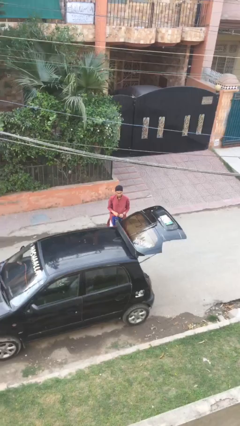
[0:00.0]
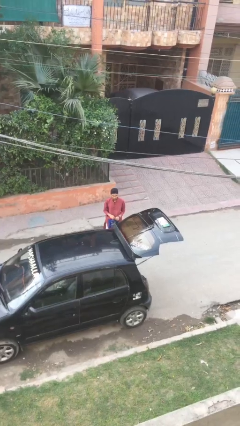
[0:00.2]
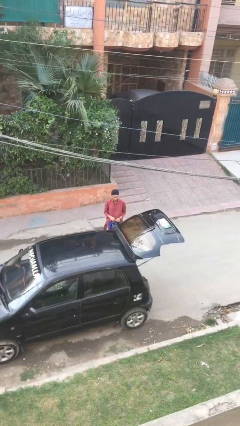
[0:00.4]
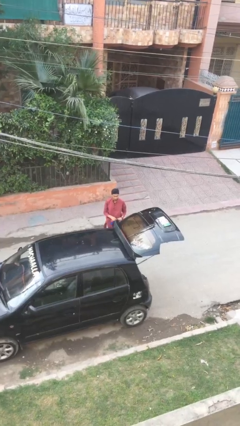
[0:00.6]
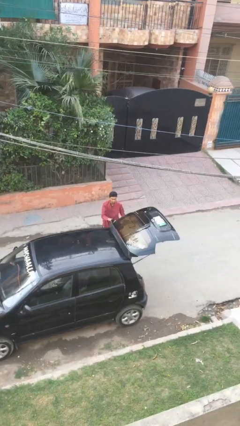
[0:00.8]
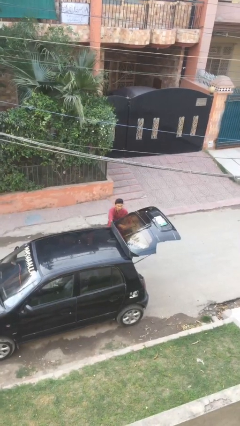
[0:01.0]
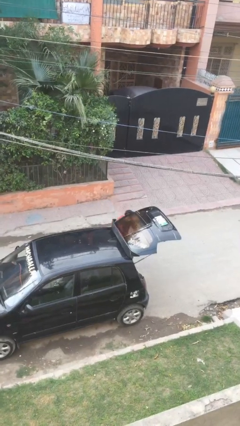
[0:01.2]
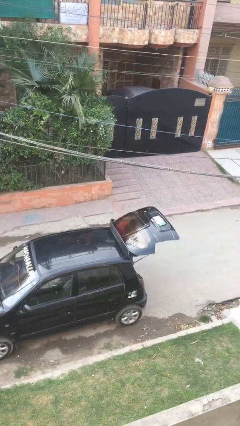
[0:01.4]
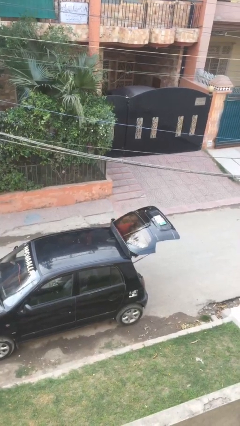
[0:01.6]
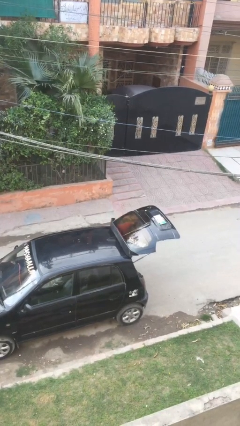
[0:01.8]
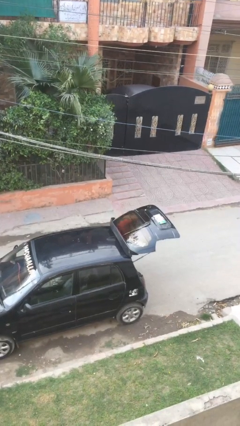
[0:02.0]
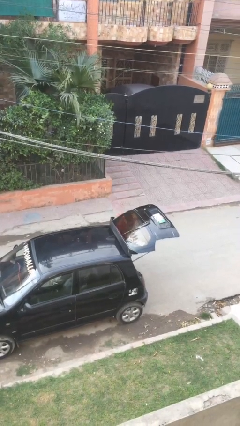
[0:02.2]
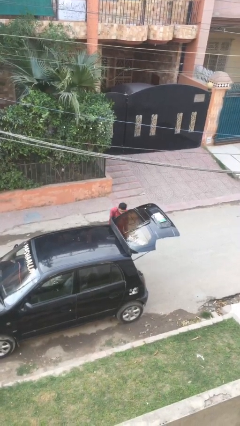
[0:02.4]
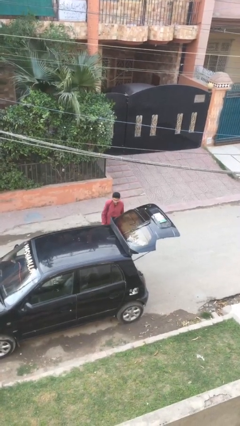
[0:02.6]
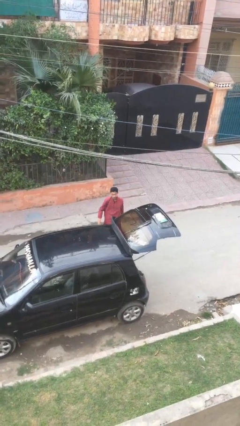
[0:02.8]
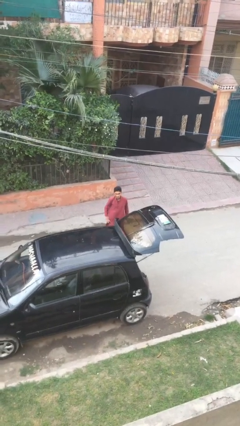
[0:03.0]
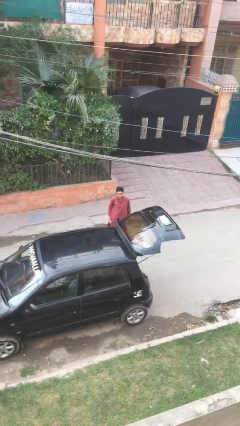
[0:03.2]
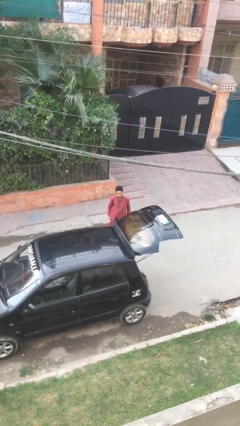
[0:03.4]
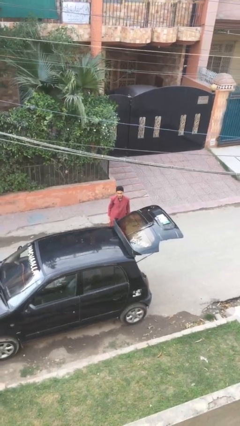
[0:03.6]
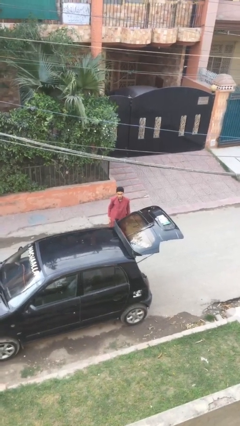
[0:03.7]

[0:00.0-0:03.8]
person loads car

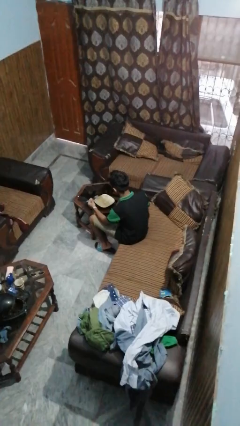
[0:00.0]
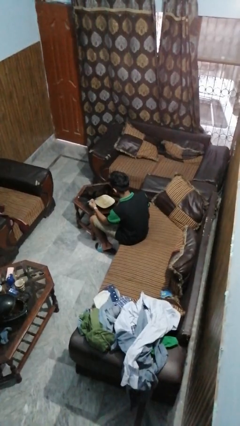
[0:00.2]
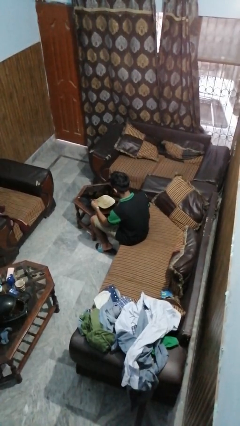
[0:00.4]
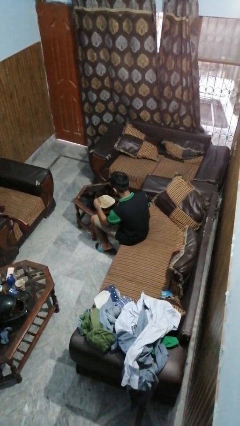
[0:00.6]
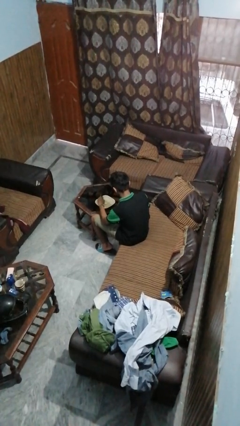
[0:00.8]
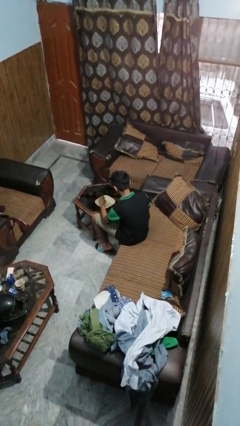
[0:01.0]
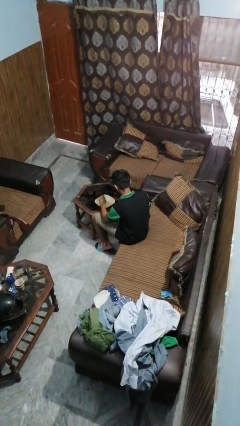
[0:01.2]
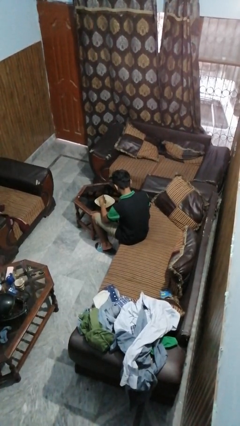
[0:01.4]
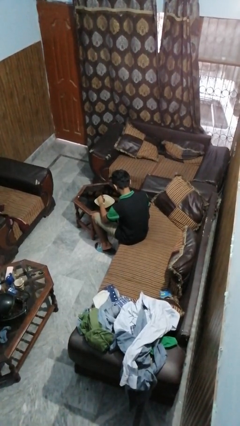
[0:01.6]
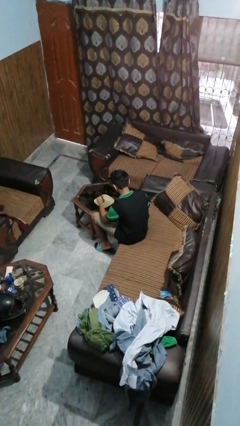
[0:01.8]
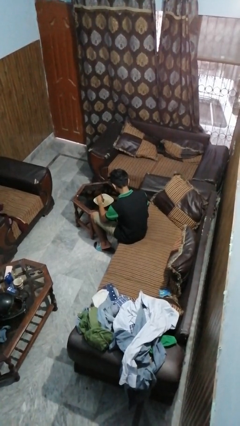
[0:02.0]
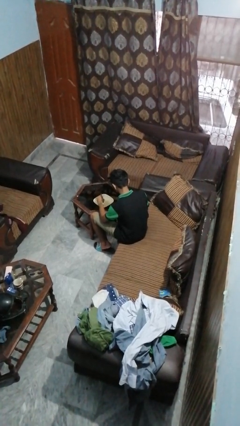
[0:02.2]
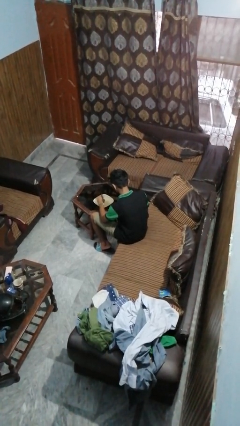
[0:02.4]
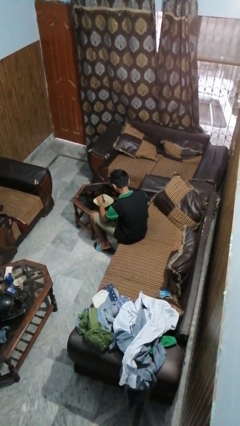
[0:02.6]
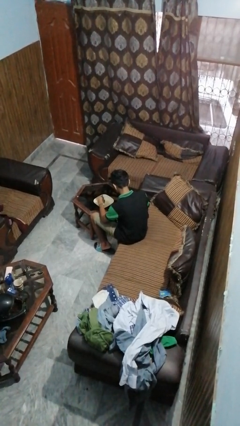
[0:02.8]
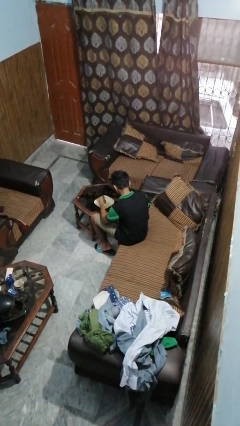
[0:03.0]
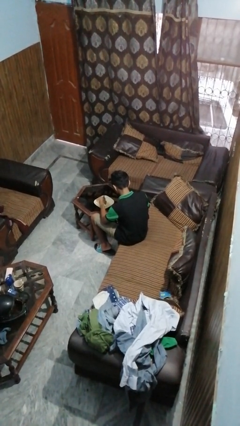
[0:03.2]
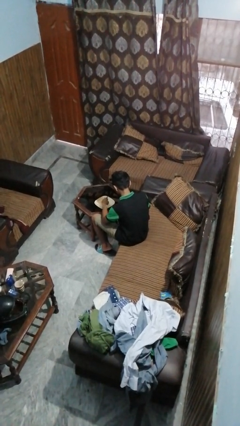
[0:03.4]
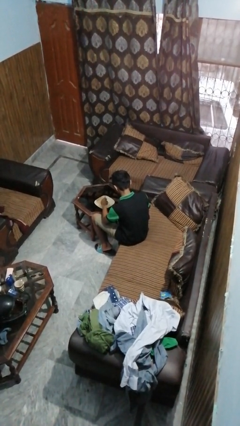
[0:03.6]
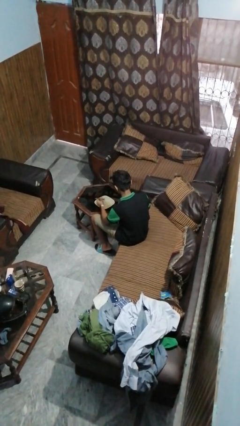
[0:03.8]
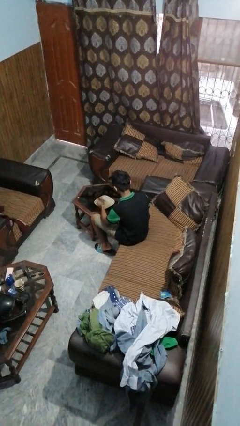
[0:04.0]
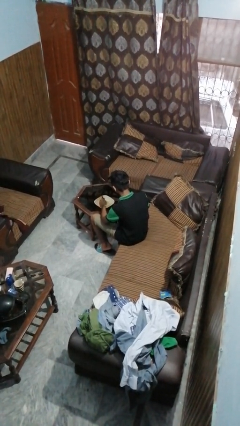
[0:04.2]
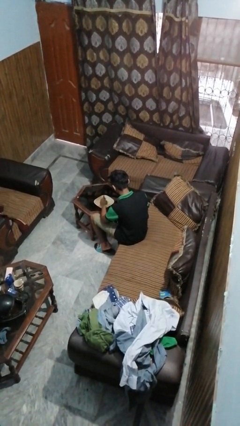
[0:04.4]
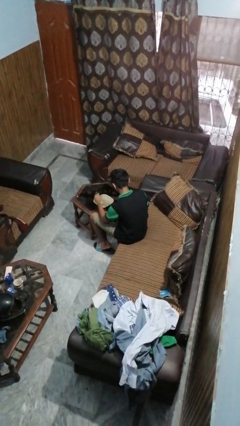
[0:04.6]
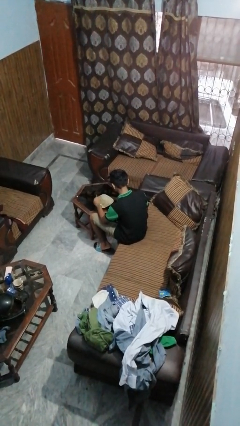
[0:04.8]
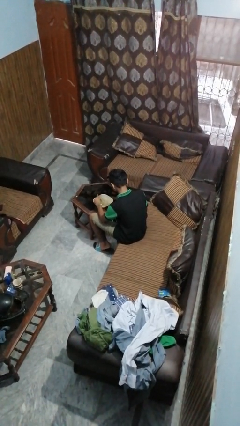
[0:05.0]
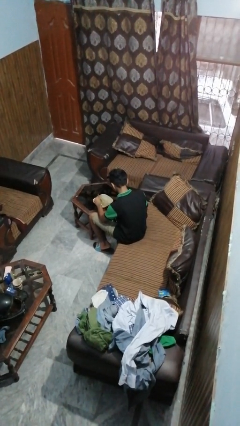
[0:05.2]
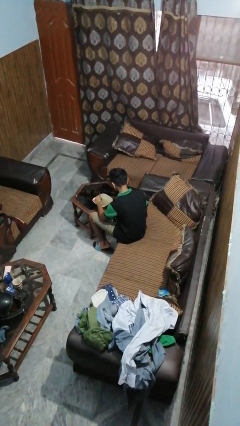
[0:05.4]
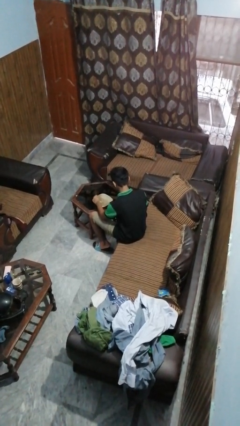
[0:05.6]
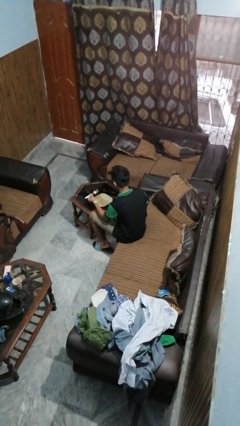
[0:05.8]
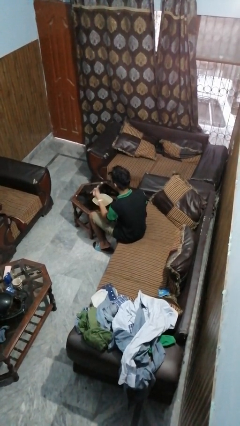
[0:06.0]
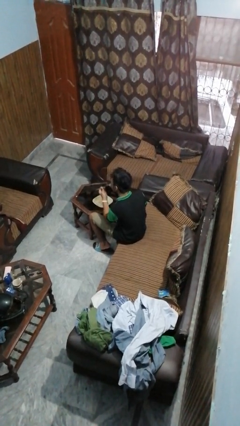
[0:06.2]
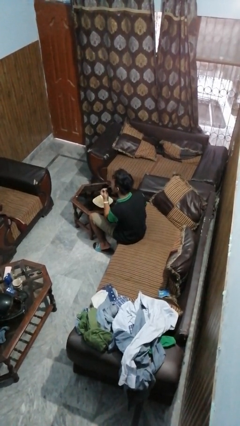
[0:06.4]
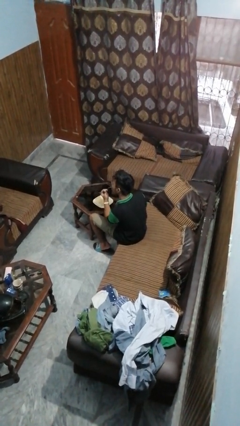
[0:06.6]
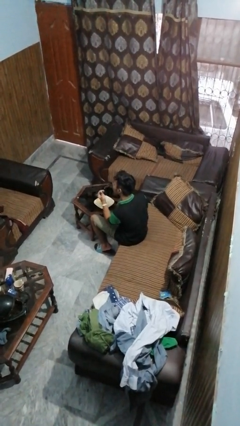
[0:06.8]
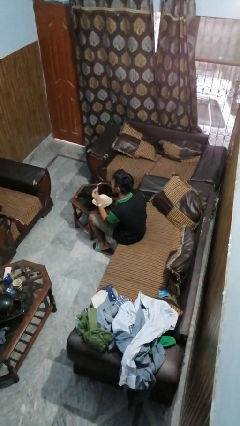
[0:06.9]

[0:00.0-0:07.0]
person eats with utensil

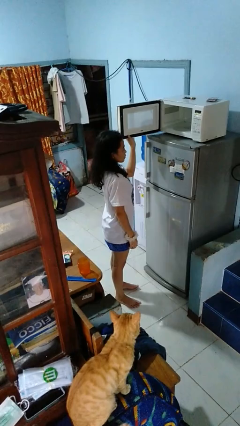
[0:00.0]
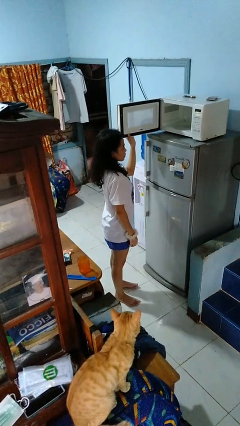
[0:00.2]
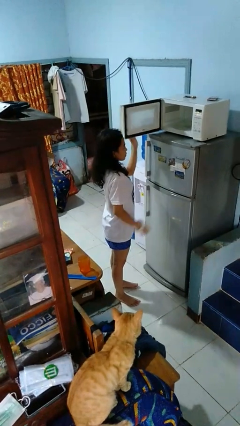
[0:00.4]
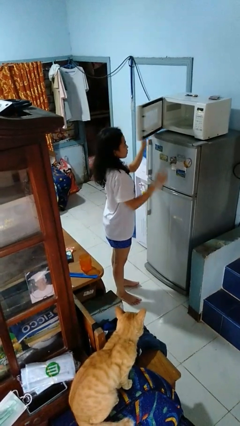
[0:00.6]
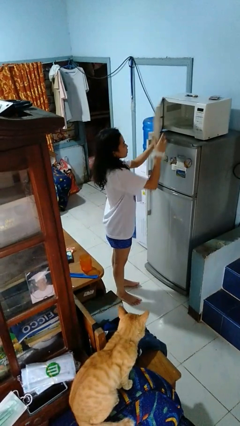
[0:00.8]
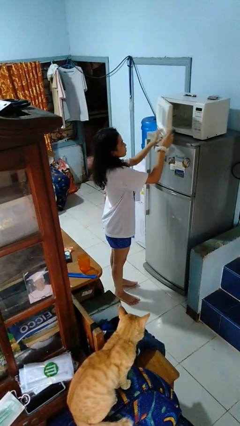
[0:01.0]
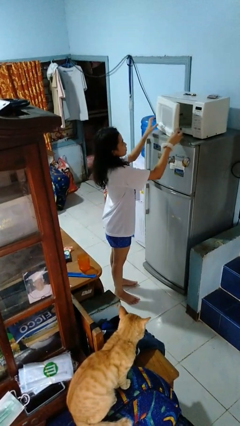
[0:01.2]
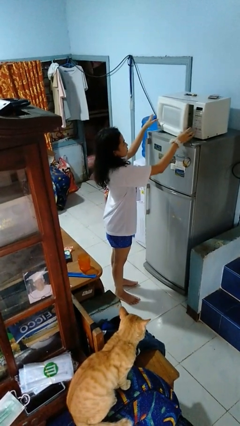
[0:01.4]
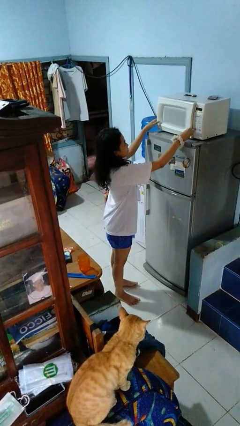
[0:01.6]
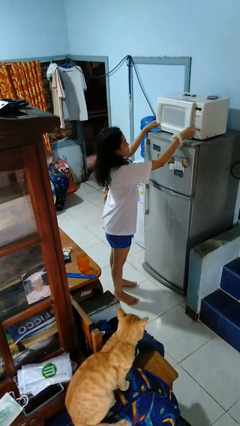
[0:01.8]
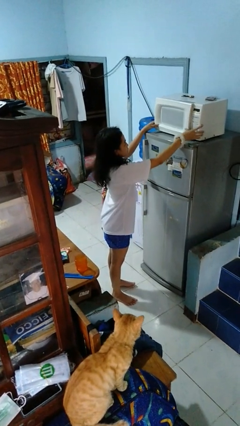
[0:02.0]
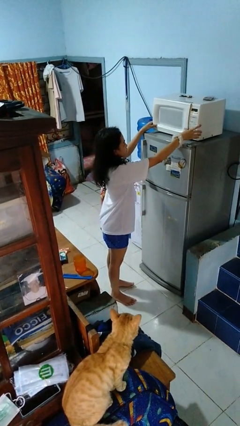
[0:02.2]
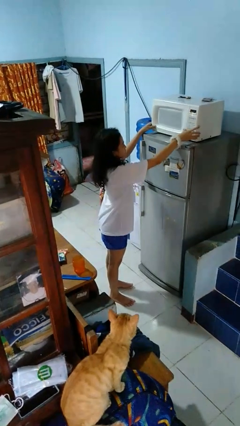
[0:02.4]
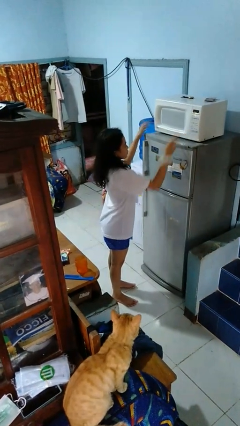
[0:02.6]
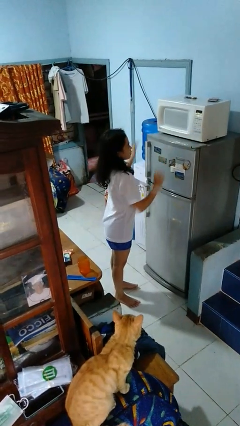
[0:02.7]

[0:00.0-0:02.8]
person closes microwave

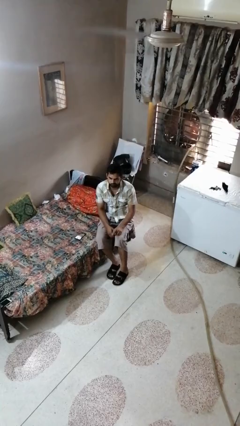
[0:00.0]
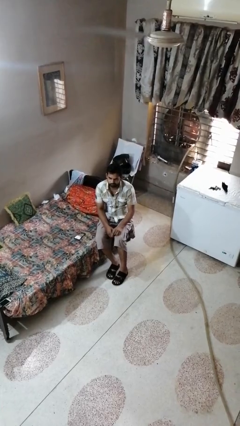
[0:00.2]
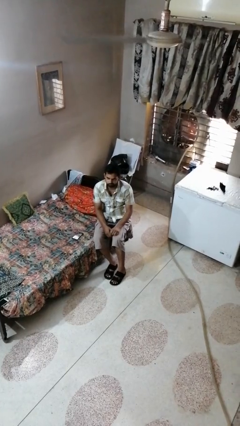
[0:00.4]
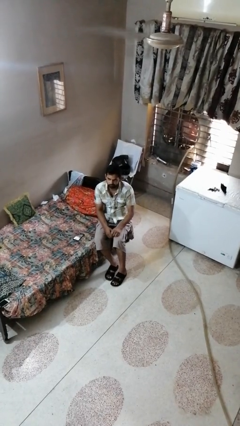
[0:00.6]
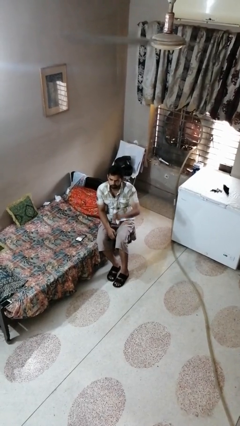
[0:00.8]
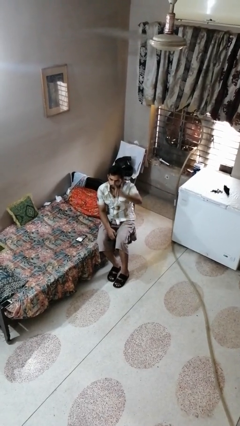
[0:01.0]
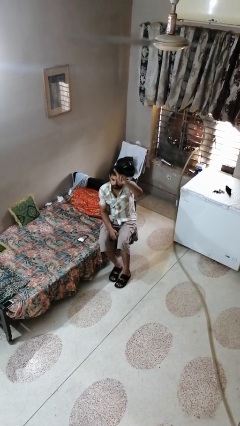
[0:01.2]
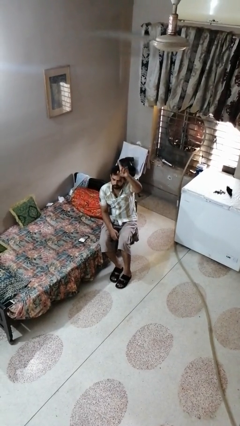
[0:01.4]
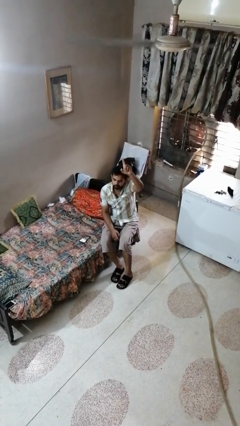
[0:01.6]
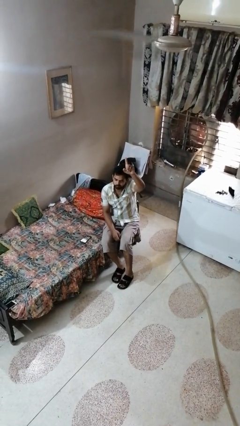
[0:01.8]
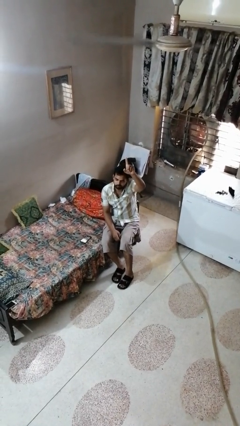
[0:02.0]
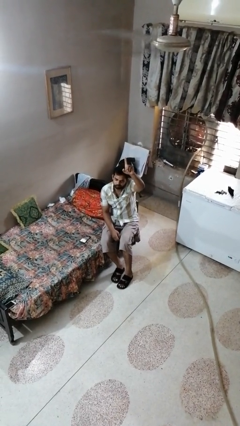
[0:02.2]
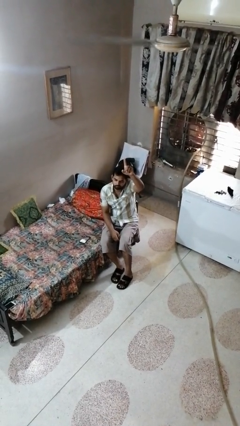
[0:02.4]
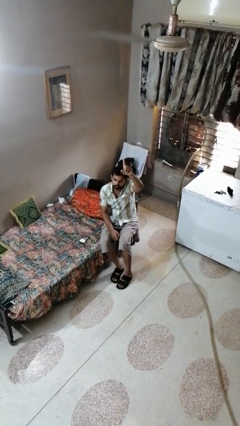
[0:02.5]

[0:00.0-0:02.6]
person gestures raise hand

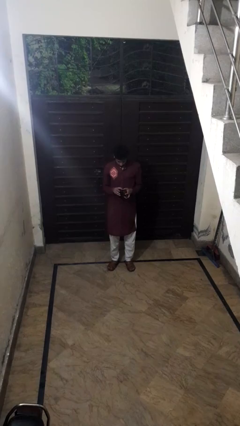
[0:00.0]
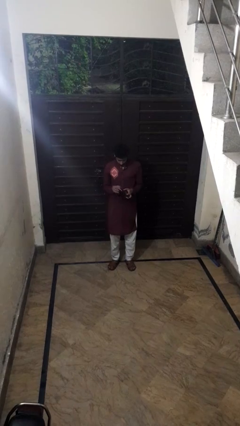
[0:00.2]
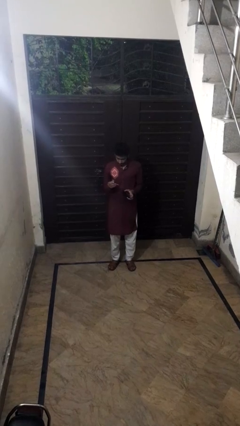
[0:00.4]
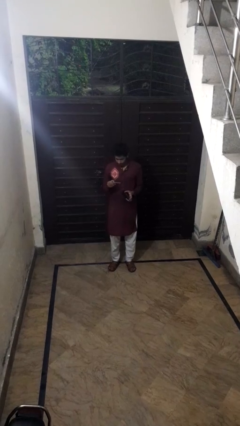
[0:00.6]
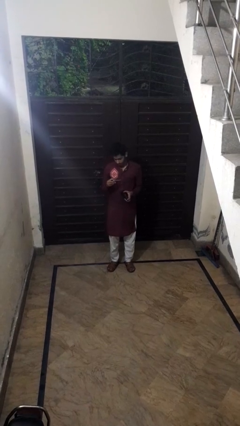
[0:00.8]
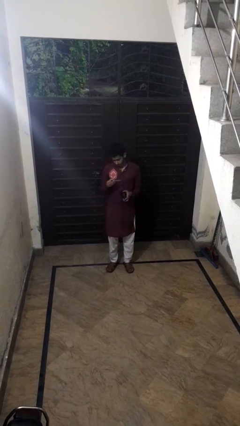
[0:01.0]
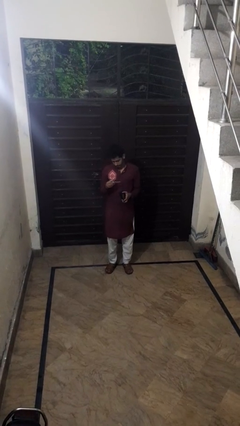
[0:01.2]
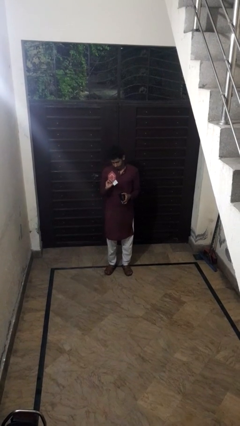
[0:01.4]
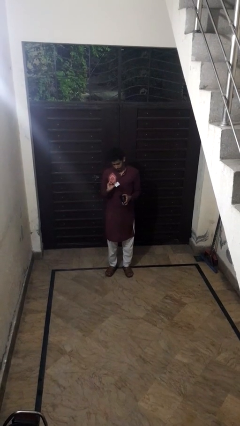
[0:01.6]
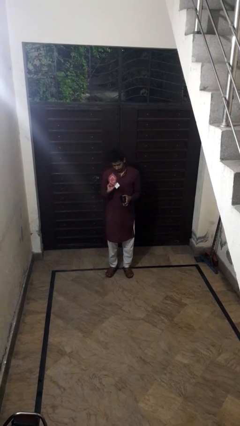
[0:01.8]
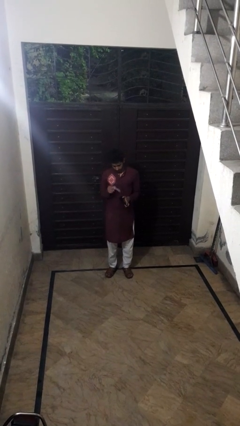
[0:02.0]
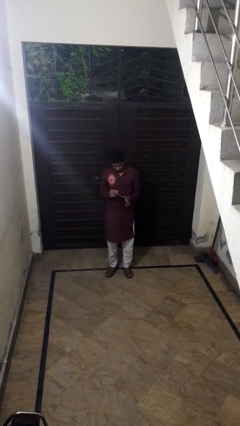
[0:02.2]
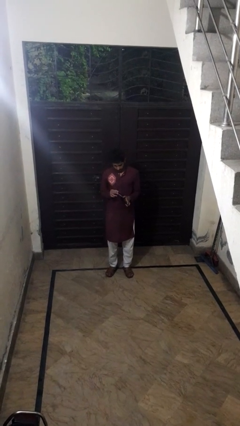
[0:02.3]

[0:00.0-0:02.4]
person takes object from purse
